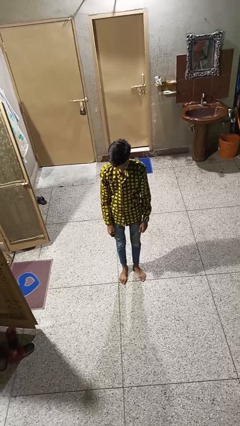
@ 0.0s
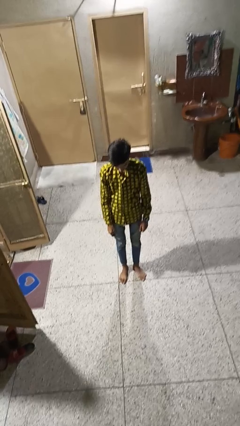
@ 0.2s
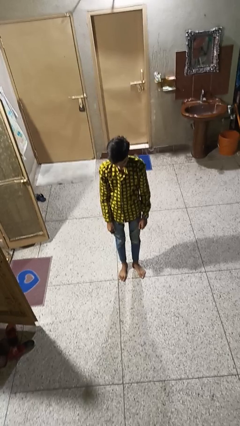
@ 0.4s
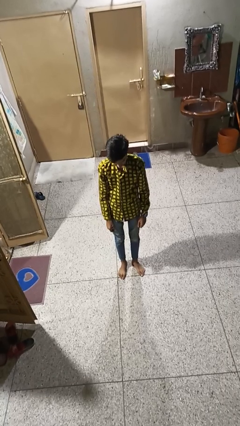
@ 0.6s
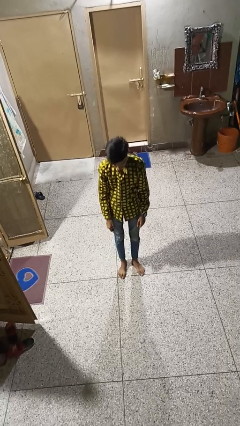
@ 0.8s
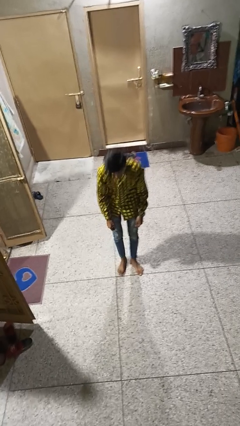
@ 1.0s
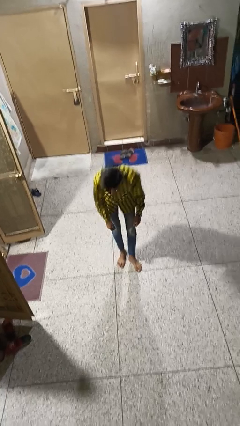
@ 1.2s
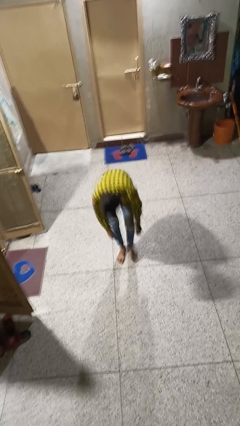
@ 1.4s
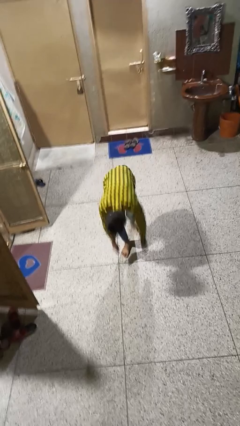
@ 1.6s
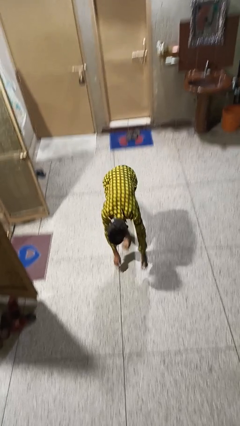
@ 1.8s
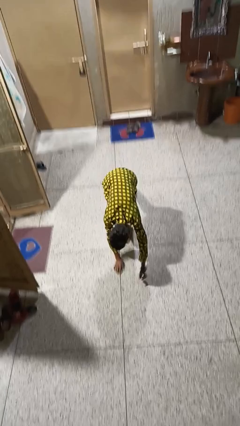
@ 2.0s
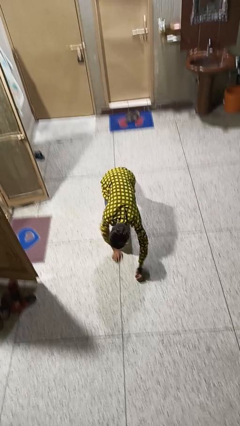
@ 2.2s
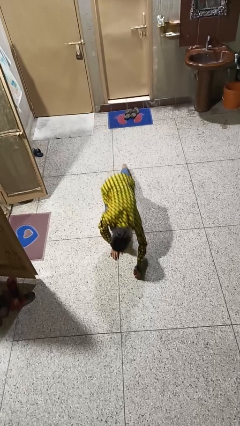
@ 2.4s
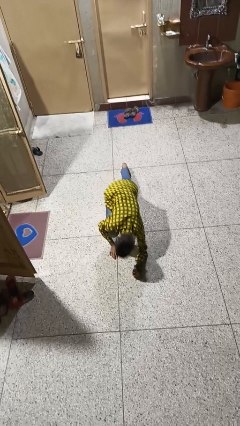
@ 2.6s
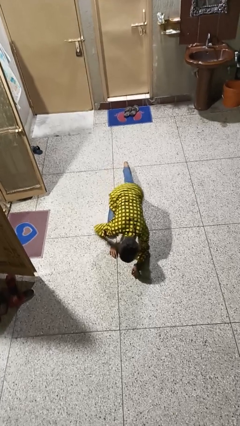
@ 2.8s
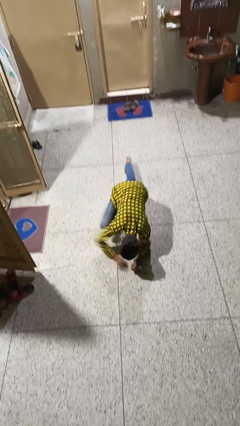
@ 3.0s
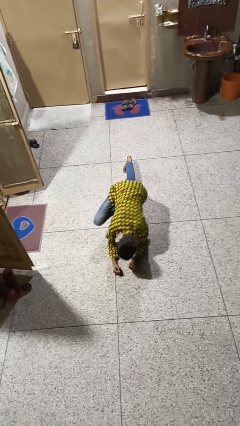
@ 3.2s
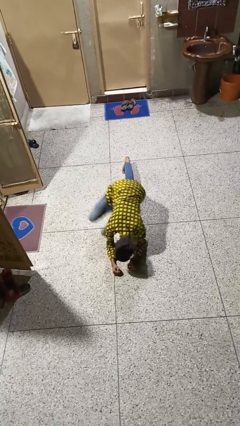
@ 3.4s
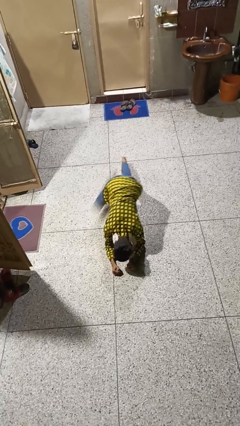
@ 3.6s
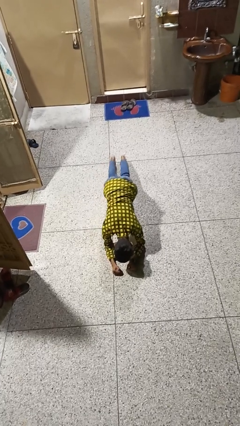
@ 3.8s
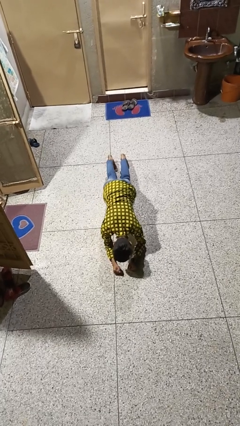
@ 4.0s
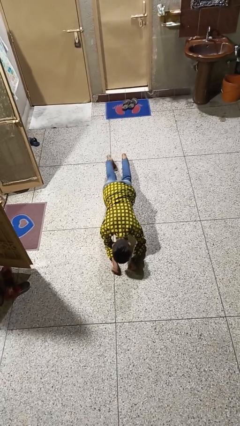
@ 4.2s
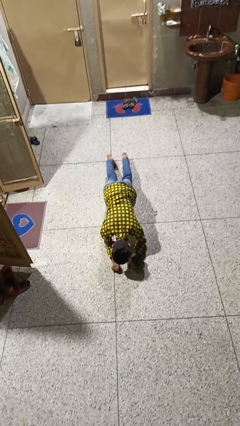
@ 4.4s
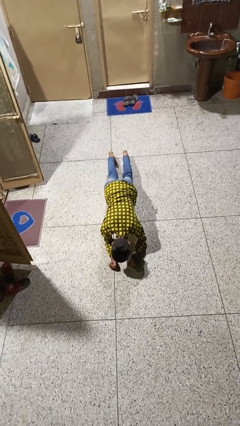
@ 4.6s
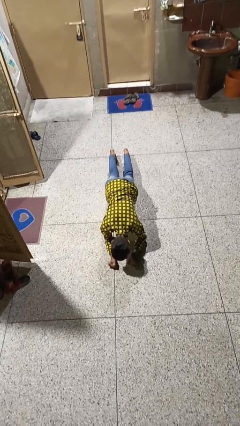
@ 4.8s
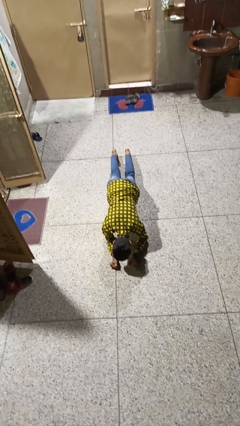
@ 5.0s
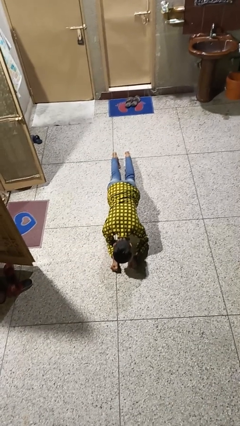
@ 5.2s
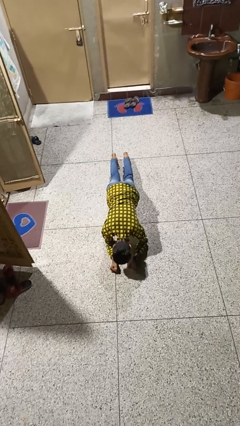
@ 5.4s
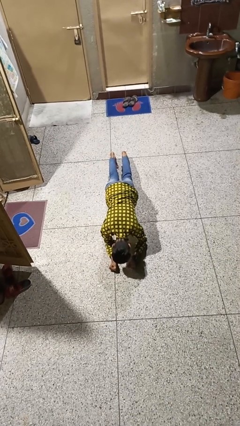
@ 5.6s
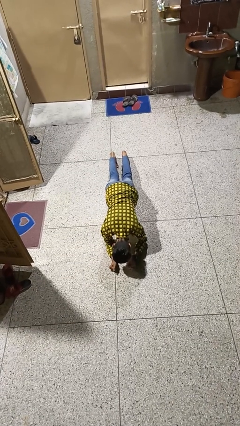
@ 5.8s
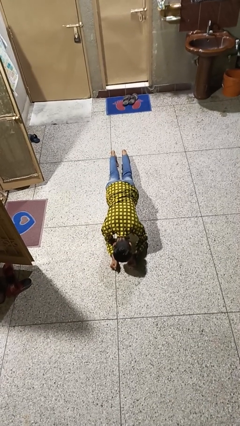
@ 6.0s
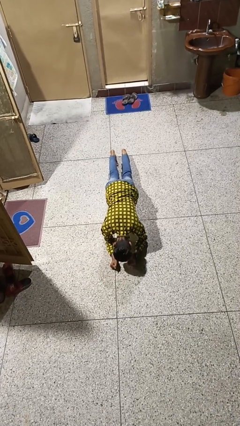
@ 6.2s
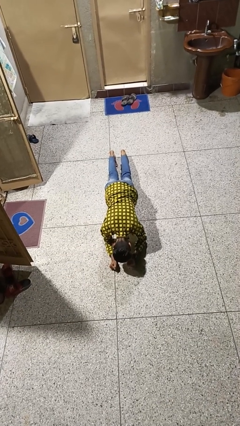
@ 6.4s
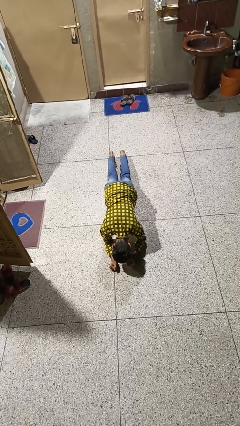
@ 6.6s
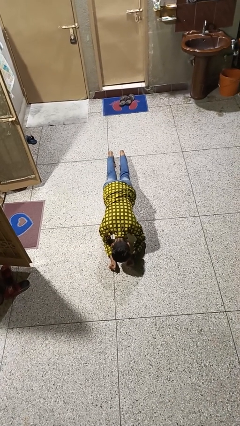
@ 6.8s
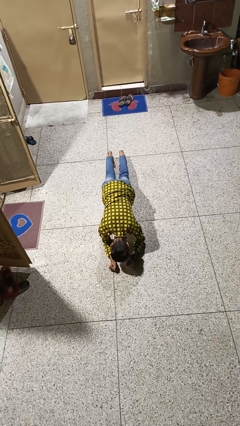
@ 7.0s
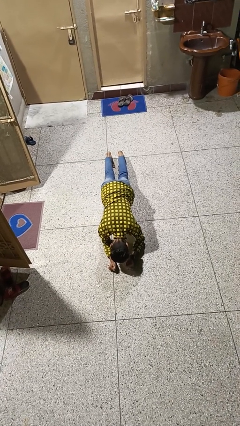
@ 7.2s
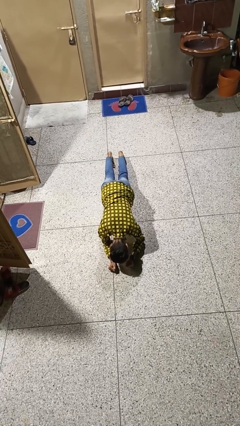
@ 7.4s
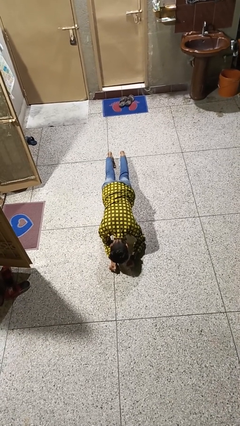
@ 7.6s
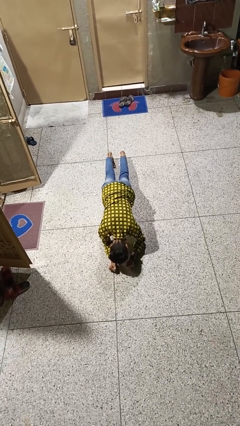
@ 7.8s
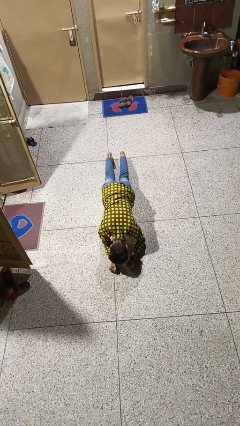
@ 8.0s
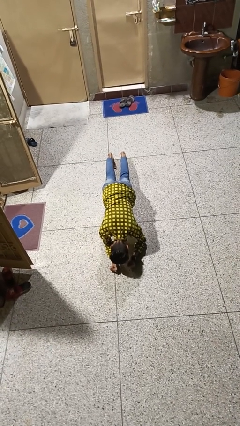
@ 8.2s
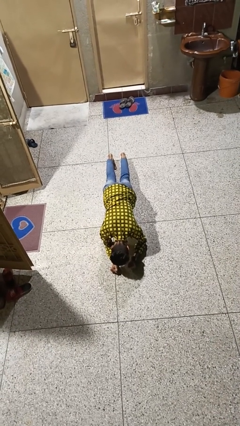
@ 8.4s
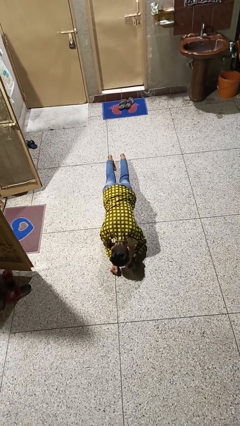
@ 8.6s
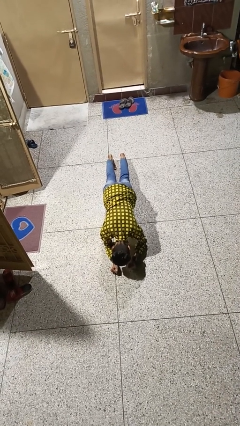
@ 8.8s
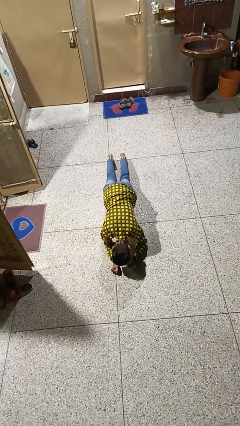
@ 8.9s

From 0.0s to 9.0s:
person exercises with plank

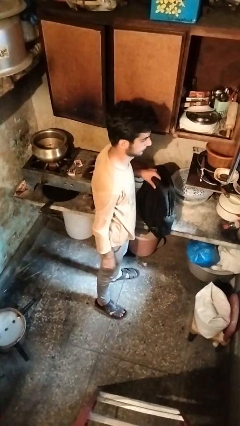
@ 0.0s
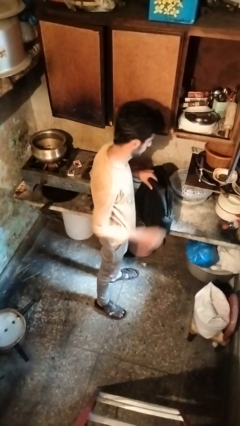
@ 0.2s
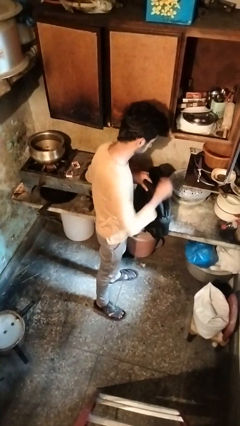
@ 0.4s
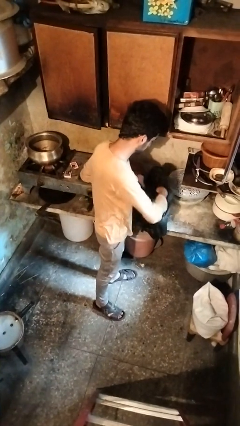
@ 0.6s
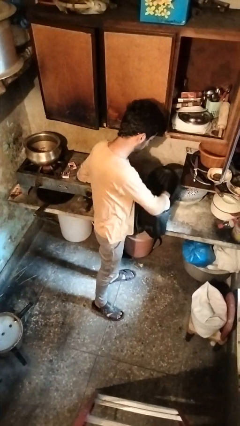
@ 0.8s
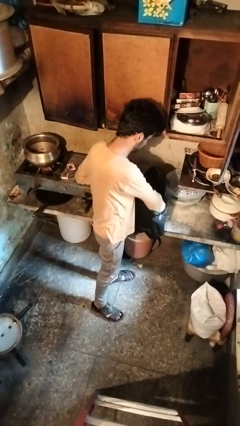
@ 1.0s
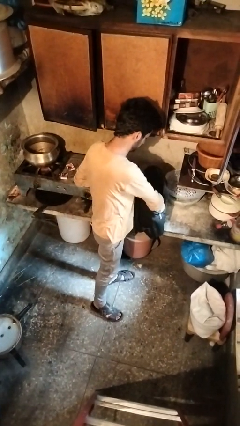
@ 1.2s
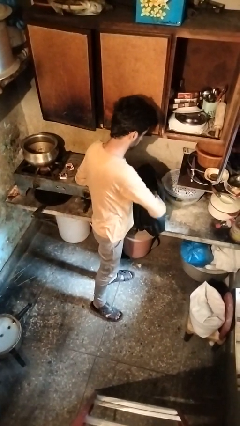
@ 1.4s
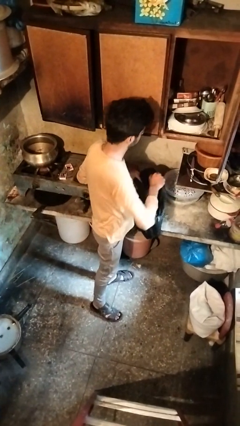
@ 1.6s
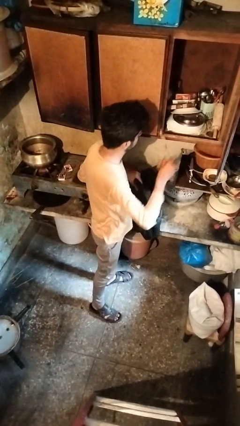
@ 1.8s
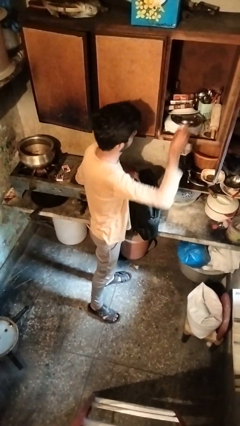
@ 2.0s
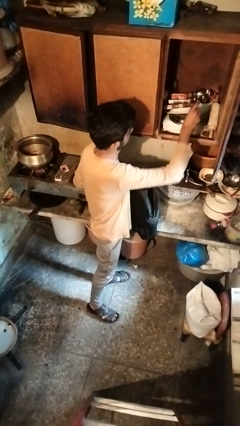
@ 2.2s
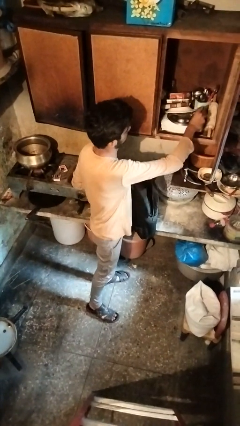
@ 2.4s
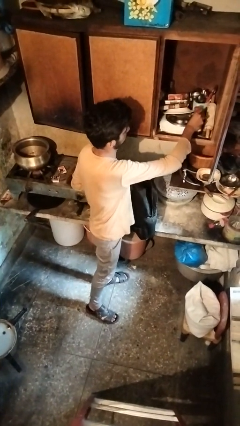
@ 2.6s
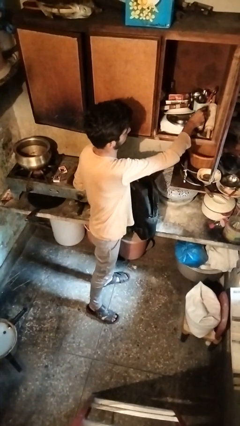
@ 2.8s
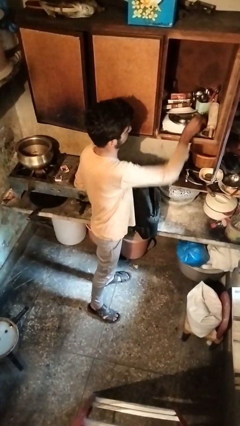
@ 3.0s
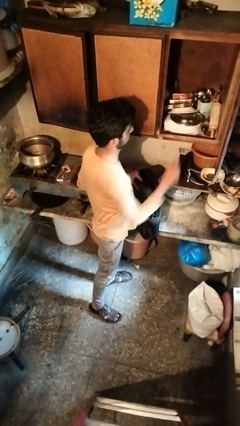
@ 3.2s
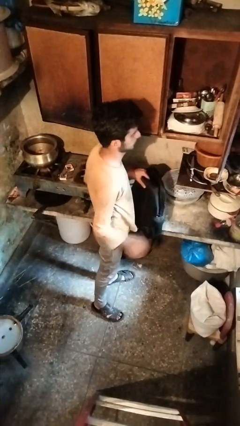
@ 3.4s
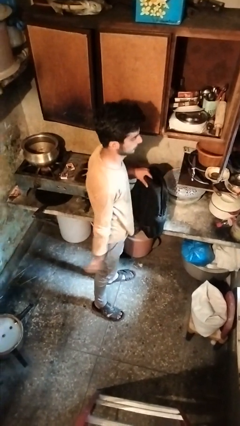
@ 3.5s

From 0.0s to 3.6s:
person loads groceries into cabinet

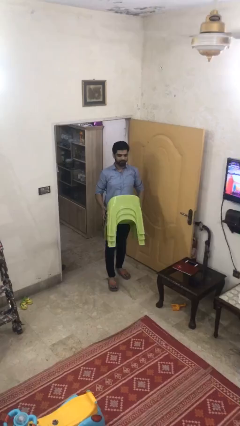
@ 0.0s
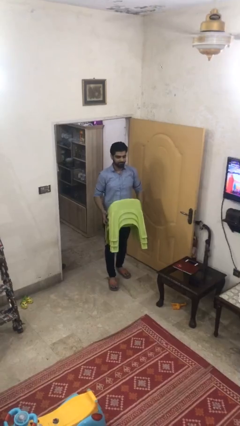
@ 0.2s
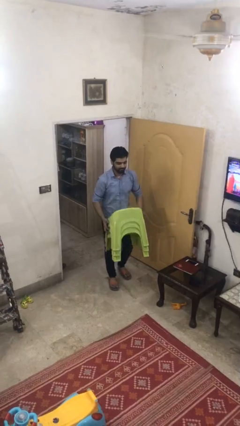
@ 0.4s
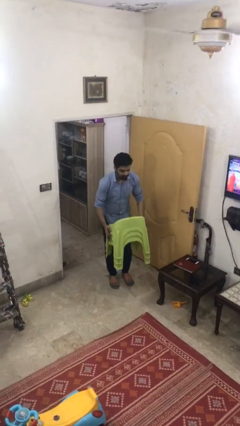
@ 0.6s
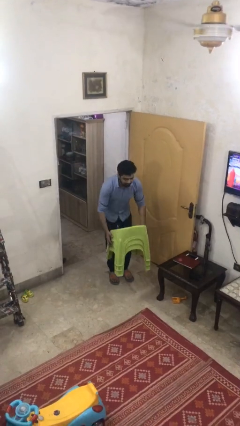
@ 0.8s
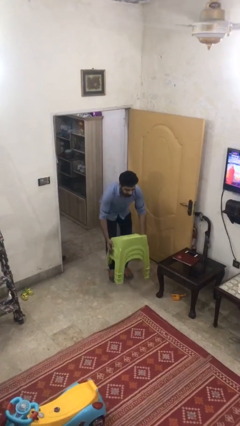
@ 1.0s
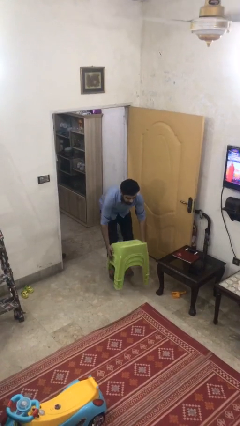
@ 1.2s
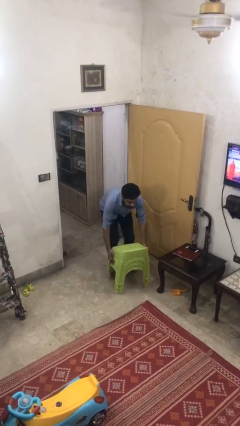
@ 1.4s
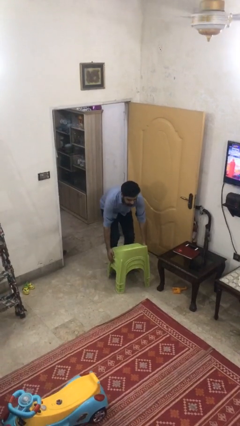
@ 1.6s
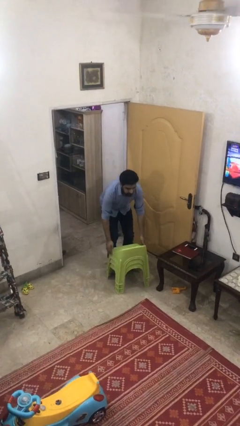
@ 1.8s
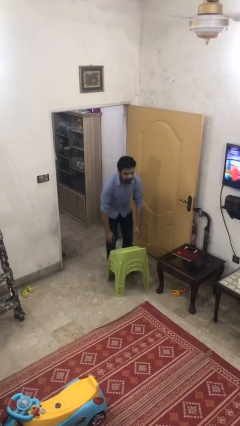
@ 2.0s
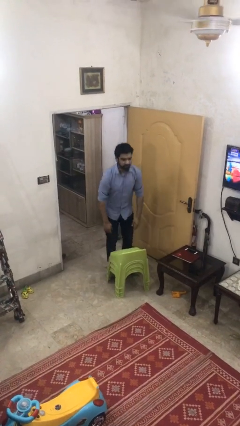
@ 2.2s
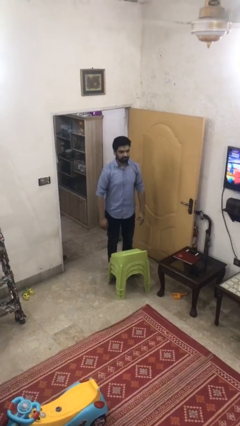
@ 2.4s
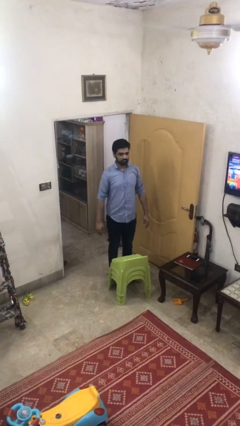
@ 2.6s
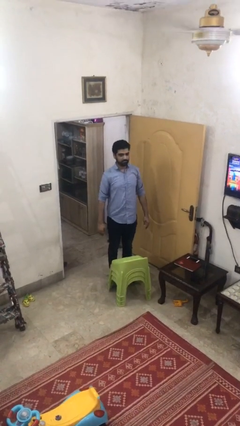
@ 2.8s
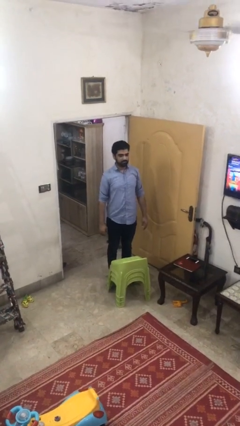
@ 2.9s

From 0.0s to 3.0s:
person puts down object on floor

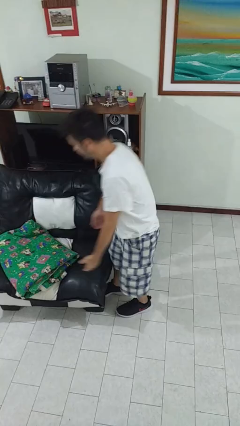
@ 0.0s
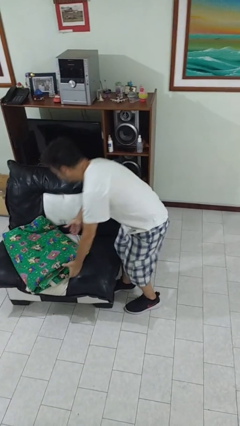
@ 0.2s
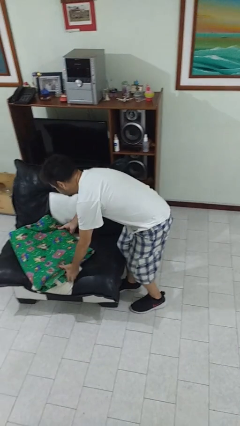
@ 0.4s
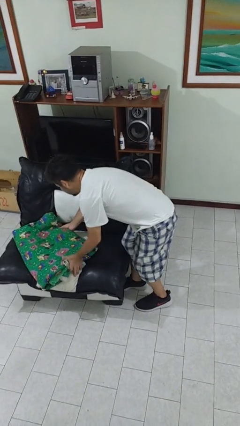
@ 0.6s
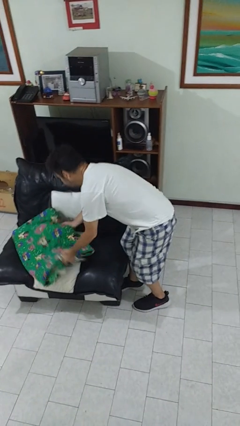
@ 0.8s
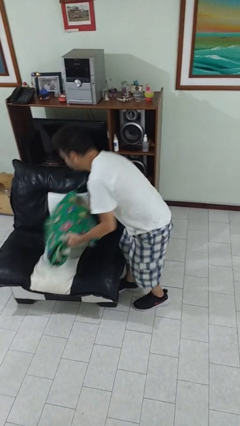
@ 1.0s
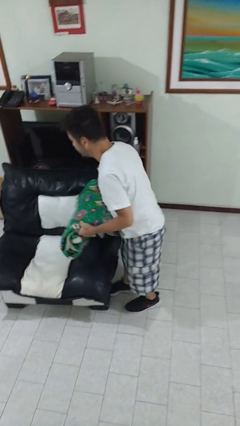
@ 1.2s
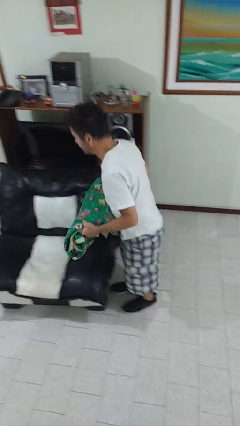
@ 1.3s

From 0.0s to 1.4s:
person picks up object from couch

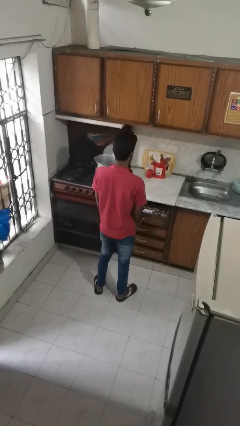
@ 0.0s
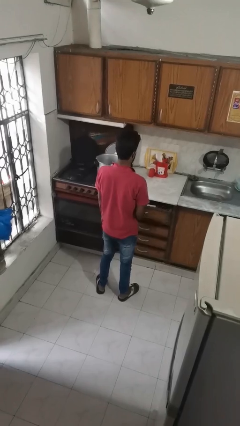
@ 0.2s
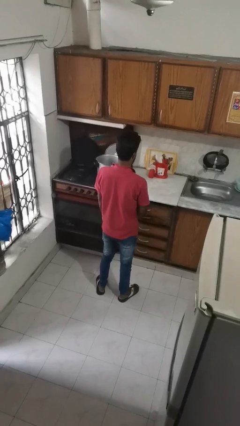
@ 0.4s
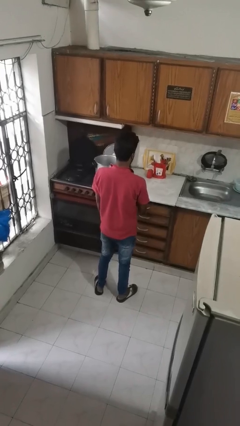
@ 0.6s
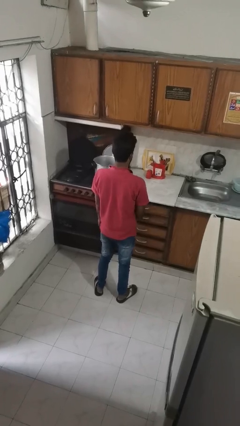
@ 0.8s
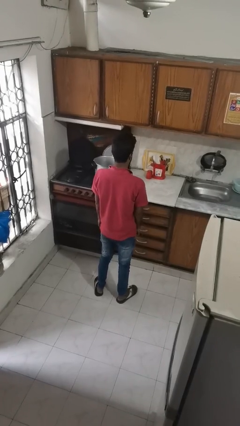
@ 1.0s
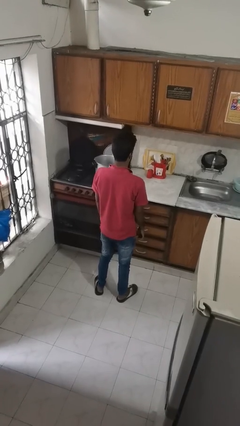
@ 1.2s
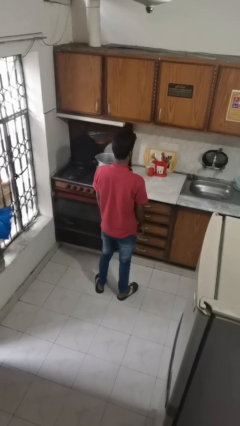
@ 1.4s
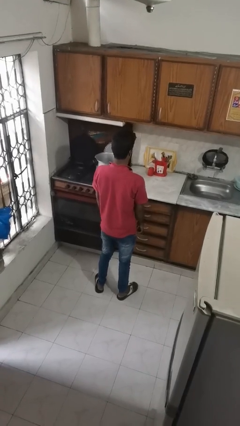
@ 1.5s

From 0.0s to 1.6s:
person closes kitchen drawer
